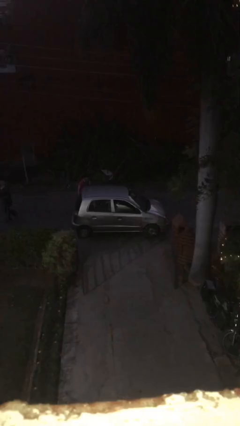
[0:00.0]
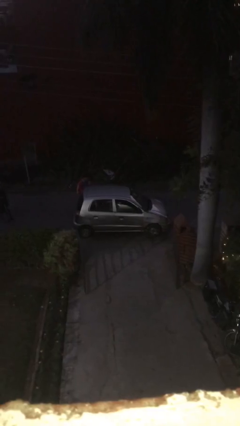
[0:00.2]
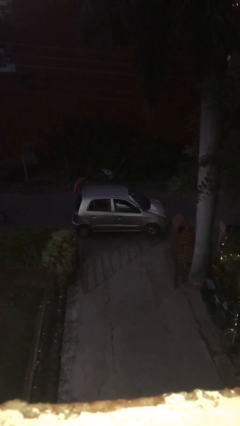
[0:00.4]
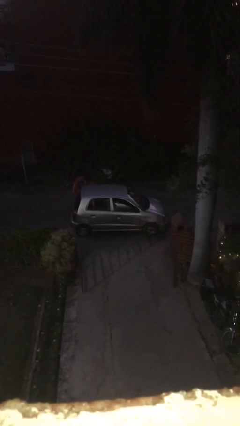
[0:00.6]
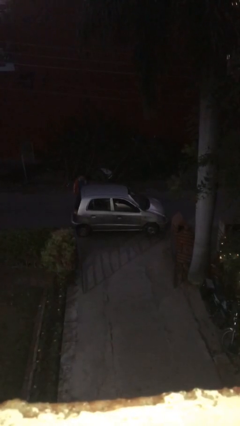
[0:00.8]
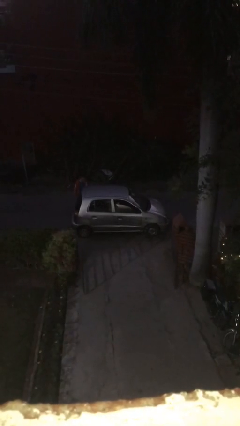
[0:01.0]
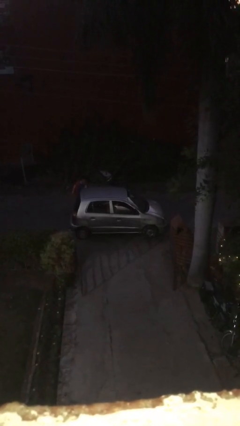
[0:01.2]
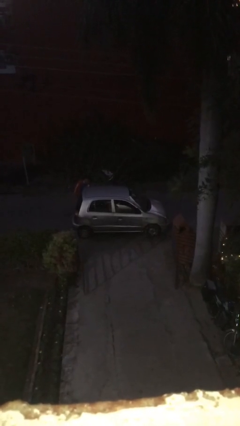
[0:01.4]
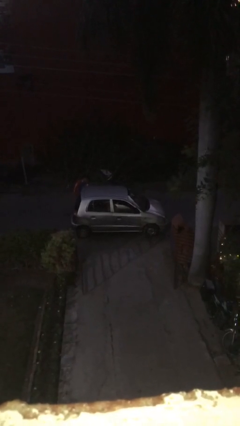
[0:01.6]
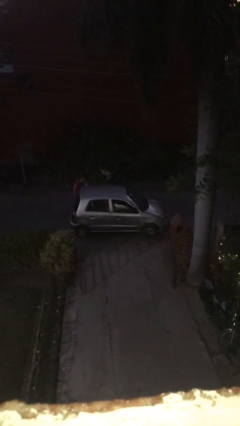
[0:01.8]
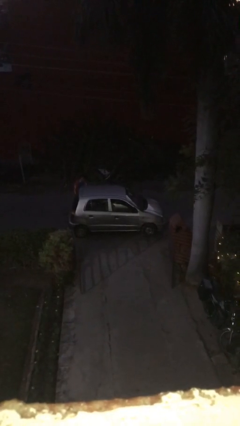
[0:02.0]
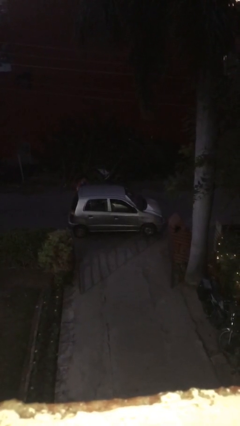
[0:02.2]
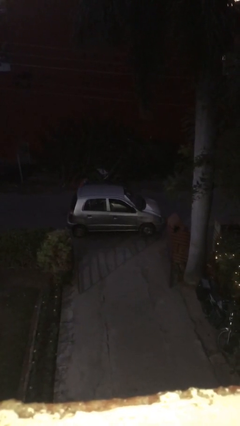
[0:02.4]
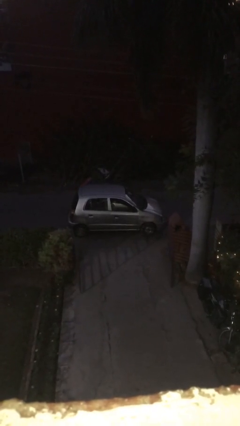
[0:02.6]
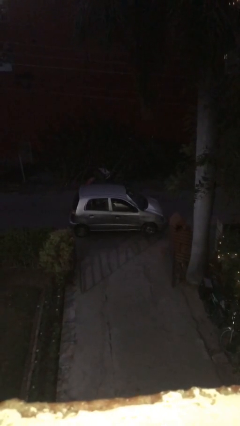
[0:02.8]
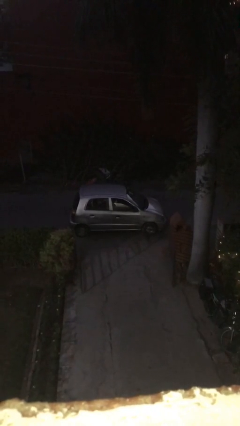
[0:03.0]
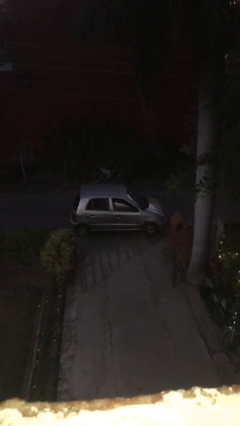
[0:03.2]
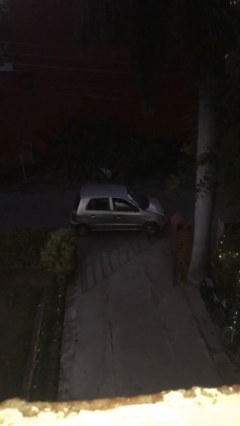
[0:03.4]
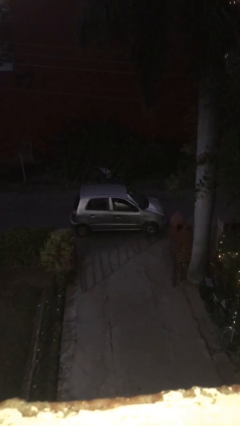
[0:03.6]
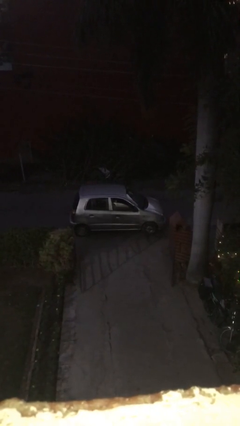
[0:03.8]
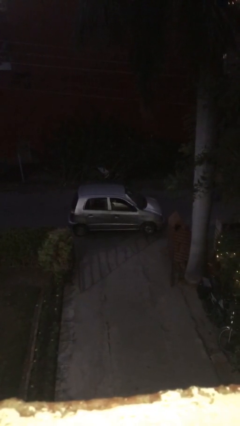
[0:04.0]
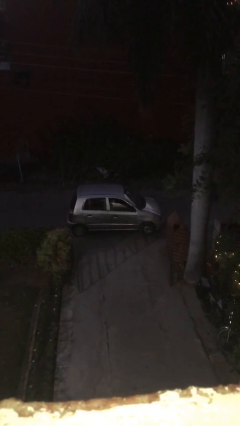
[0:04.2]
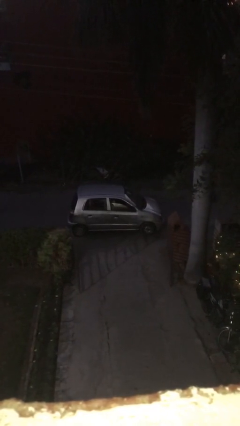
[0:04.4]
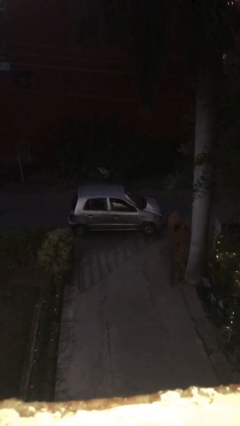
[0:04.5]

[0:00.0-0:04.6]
car picks up person

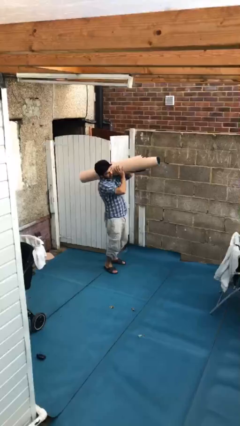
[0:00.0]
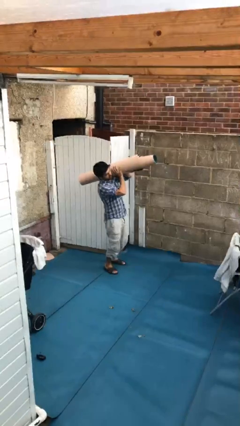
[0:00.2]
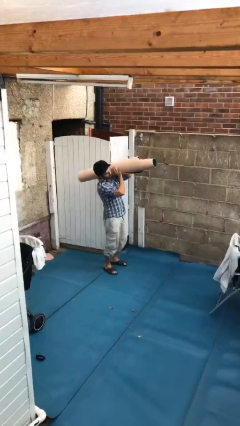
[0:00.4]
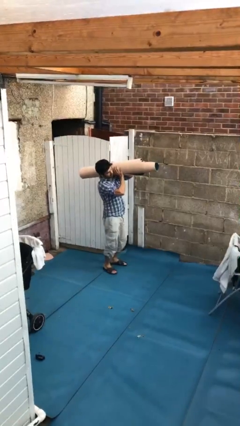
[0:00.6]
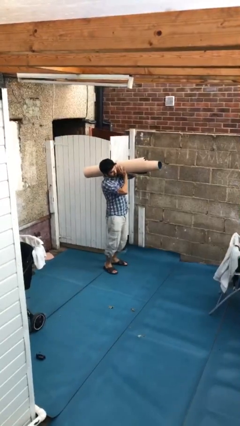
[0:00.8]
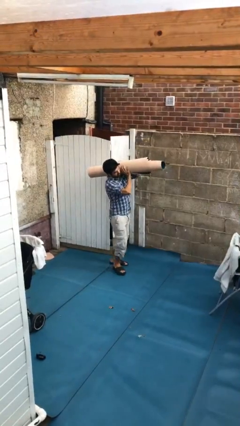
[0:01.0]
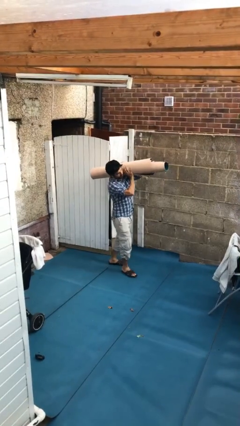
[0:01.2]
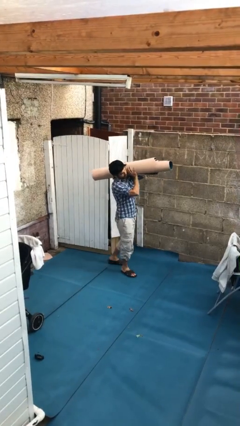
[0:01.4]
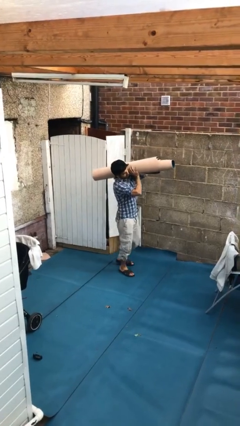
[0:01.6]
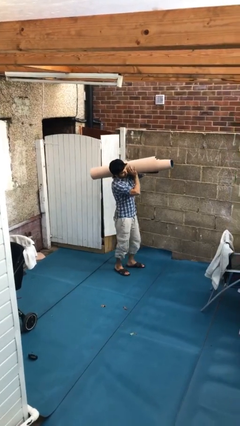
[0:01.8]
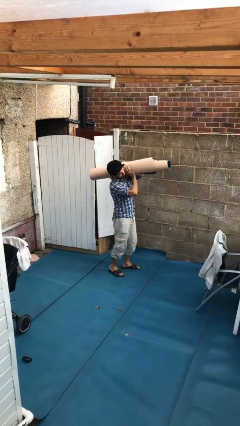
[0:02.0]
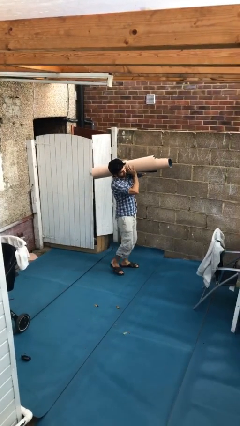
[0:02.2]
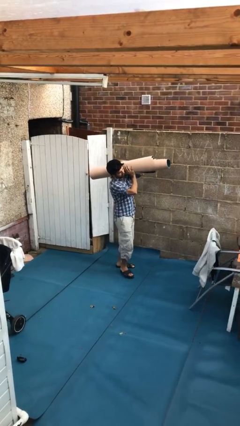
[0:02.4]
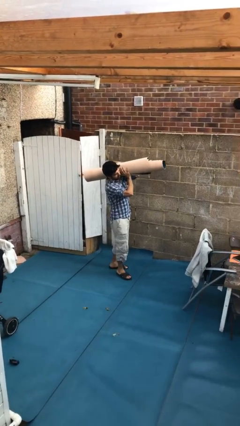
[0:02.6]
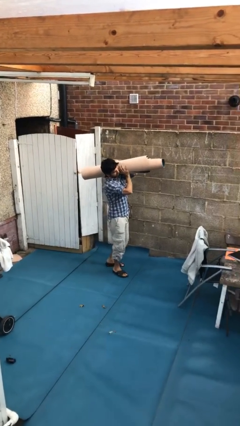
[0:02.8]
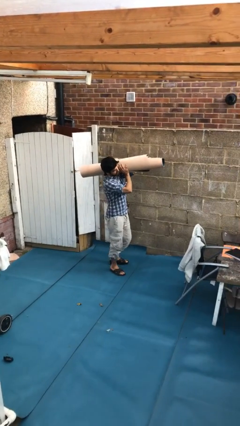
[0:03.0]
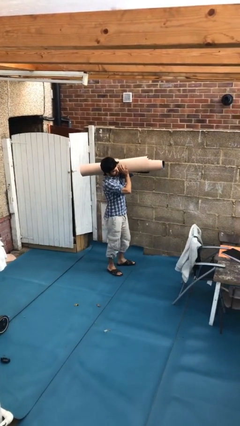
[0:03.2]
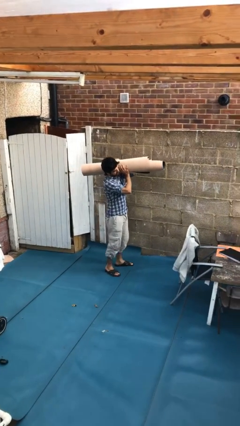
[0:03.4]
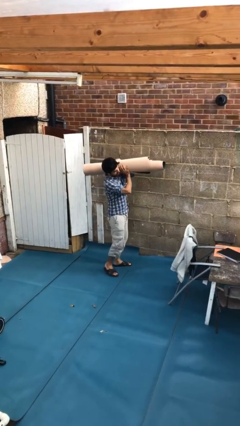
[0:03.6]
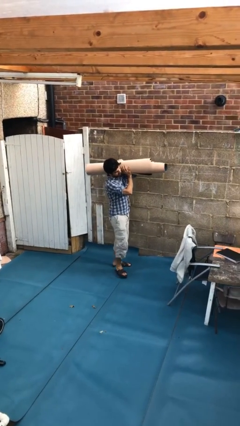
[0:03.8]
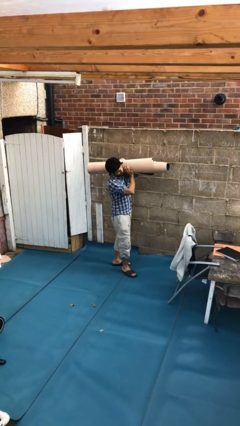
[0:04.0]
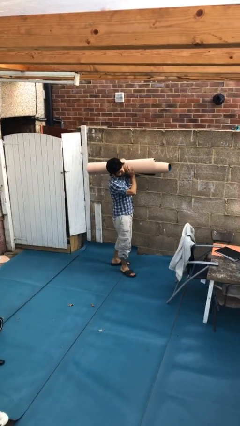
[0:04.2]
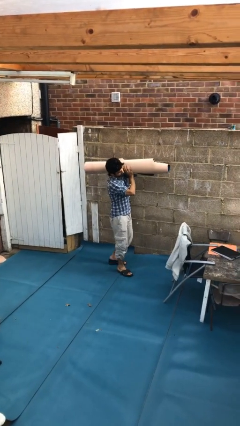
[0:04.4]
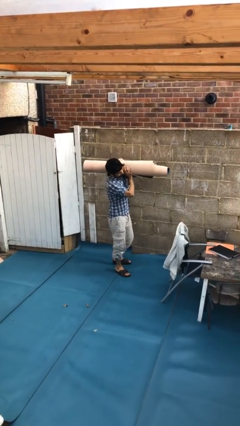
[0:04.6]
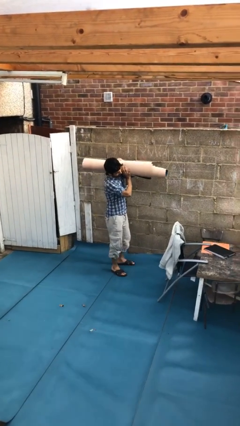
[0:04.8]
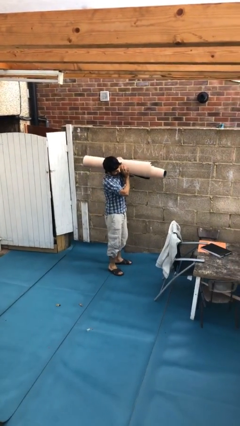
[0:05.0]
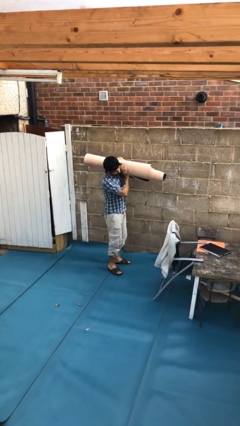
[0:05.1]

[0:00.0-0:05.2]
person carries heavy object

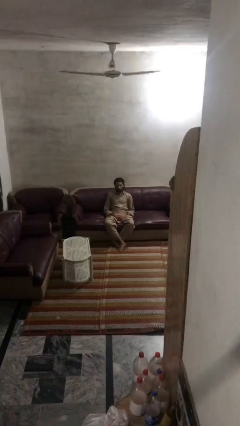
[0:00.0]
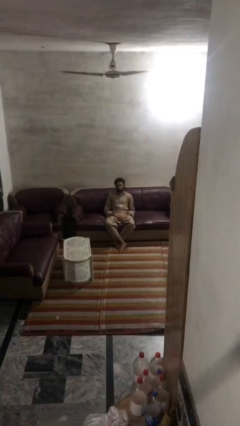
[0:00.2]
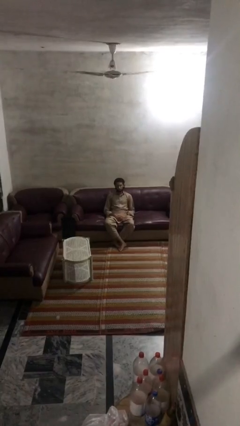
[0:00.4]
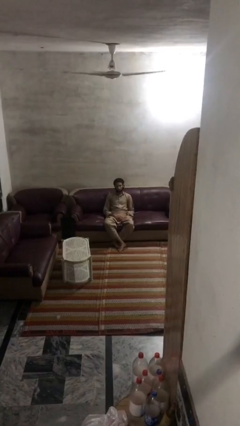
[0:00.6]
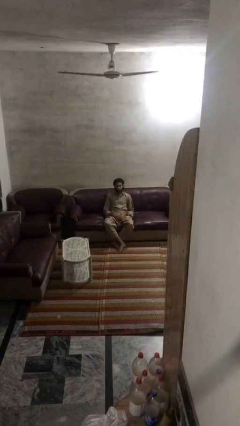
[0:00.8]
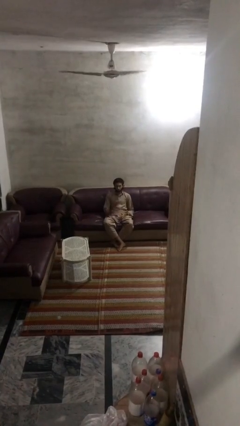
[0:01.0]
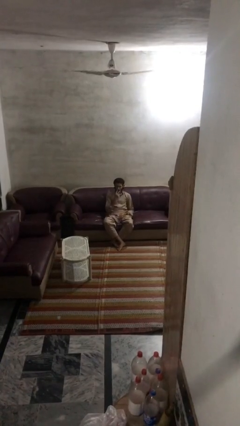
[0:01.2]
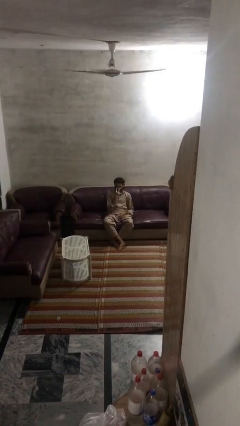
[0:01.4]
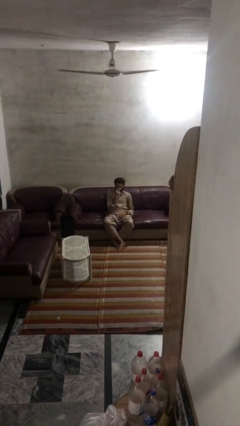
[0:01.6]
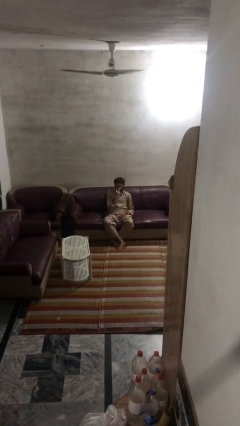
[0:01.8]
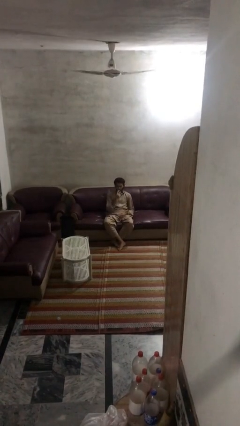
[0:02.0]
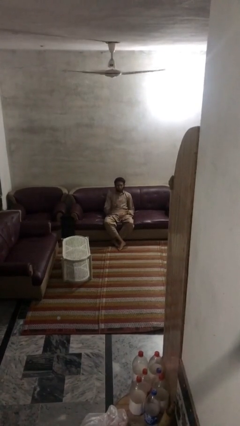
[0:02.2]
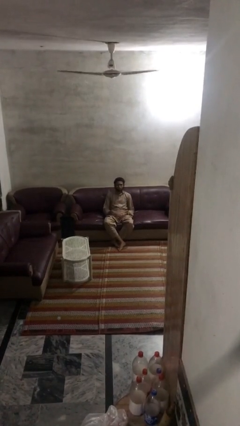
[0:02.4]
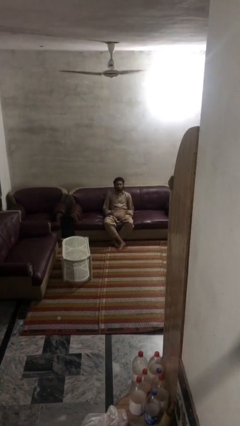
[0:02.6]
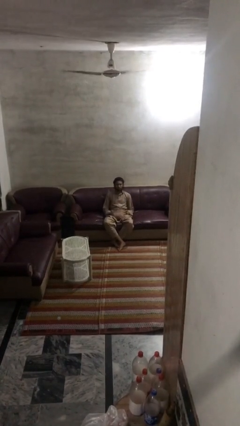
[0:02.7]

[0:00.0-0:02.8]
person gestures watch closely

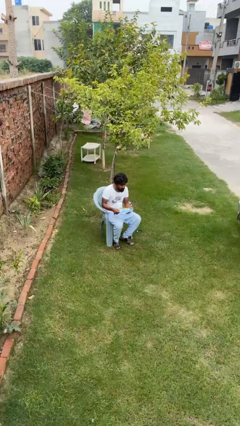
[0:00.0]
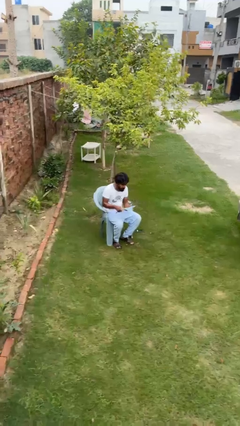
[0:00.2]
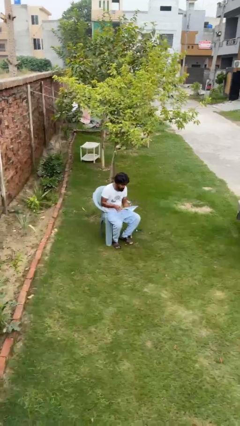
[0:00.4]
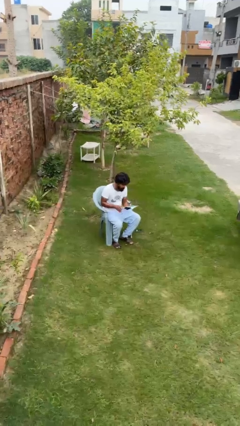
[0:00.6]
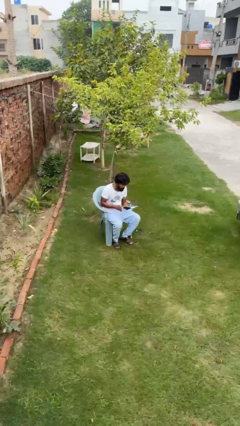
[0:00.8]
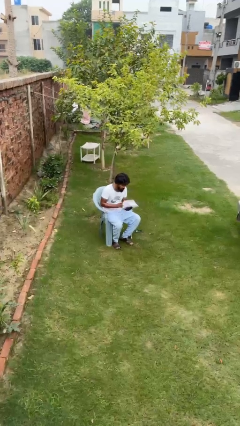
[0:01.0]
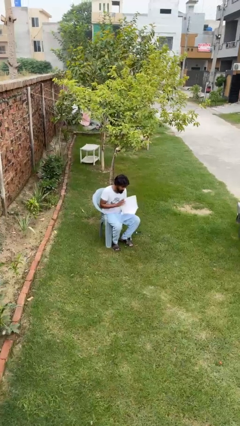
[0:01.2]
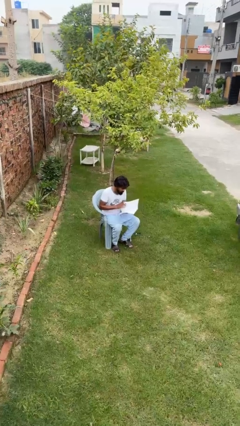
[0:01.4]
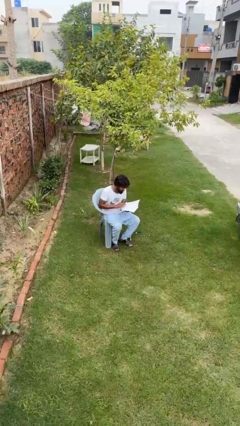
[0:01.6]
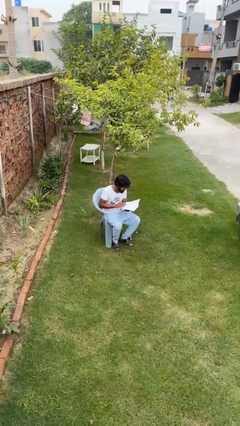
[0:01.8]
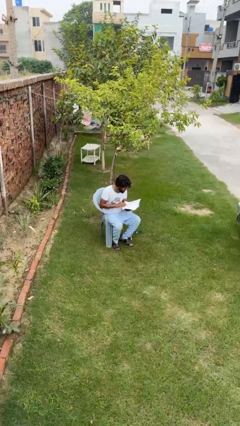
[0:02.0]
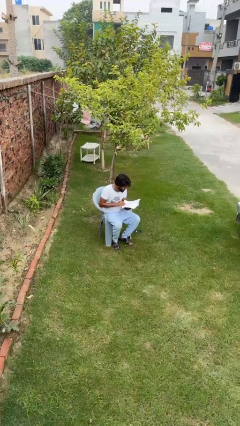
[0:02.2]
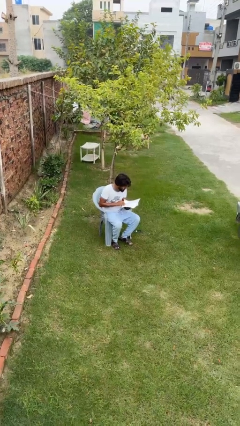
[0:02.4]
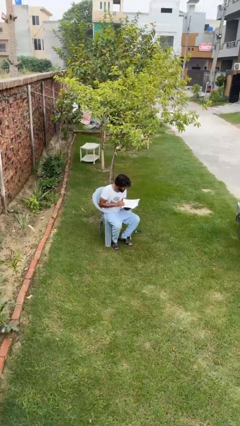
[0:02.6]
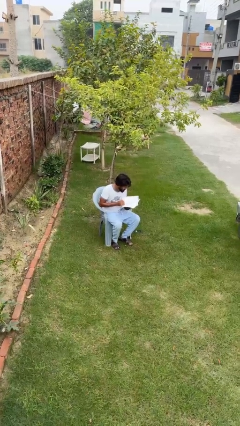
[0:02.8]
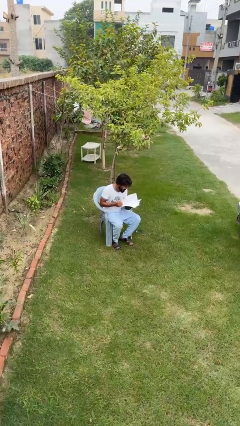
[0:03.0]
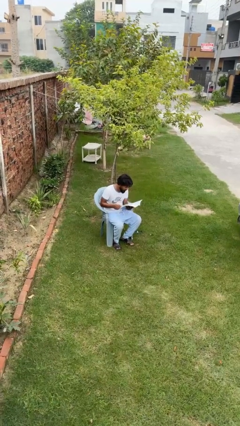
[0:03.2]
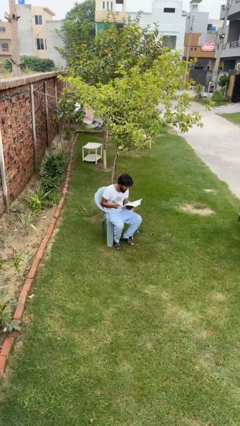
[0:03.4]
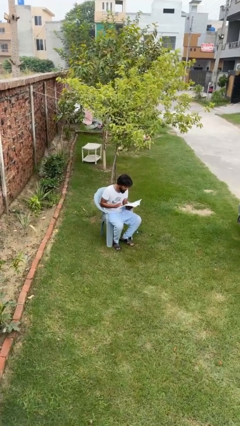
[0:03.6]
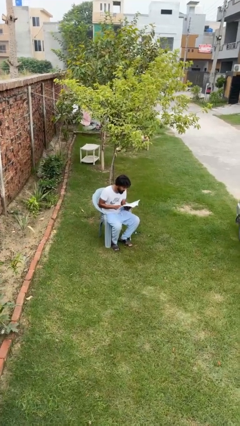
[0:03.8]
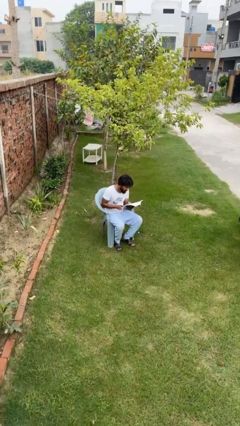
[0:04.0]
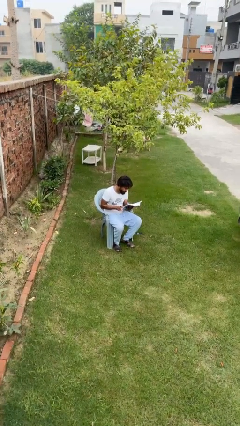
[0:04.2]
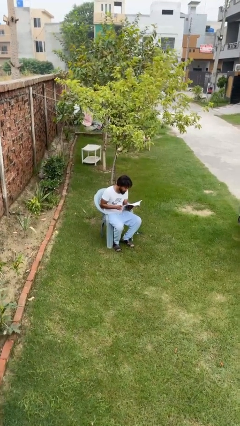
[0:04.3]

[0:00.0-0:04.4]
person reads book

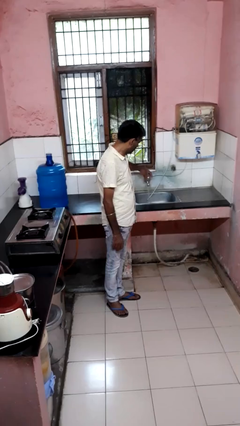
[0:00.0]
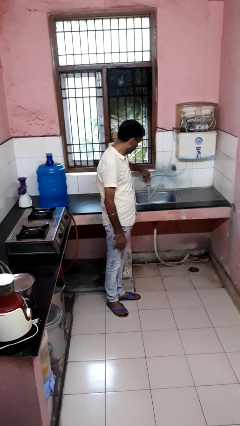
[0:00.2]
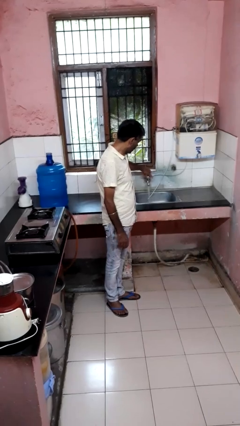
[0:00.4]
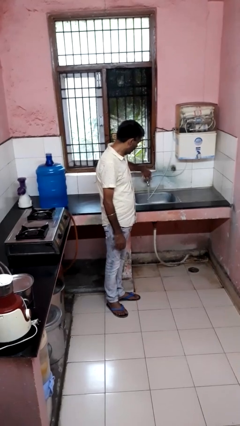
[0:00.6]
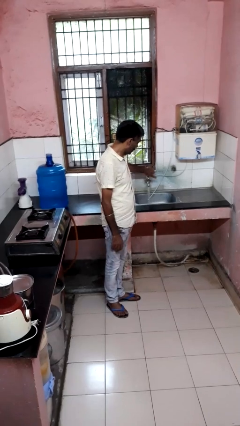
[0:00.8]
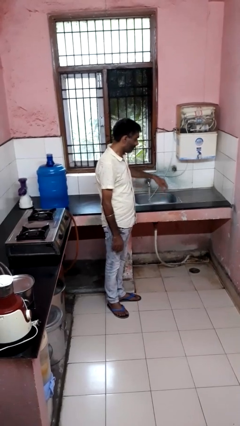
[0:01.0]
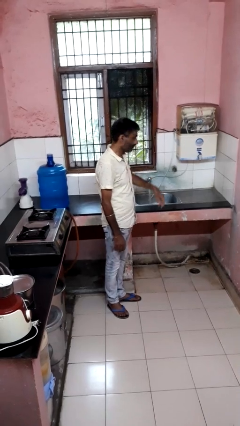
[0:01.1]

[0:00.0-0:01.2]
person turns on faucet
